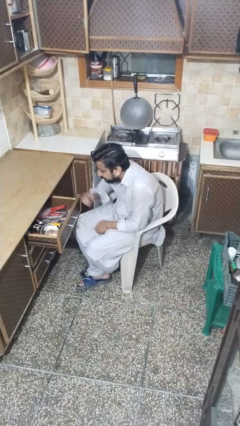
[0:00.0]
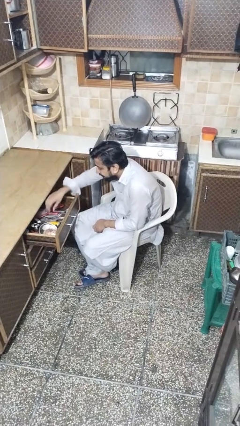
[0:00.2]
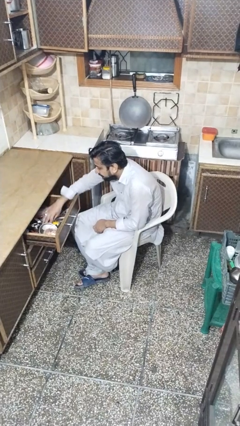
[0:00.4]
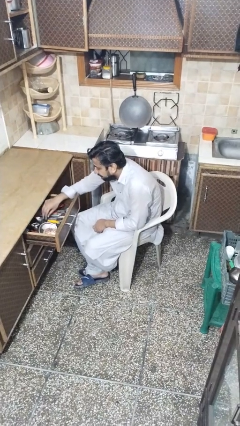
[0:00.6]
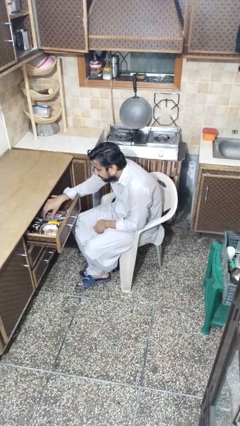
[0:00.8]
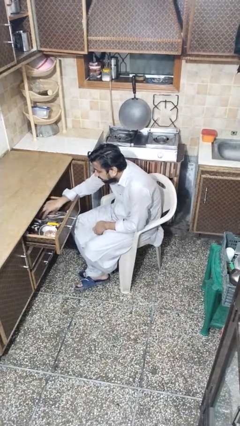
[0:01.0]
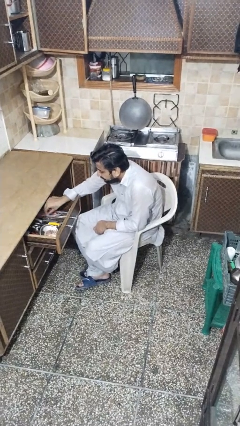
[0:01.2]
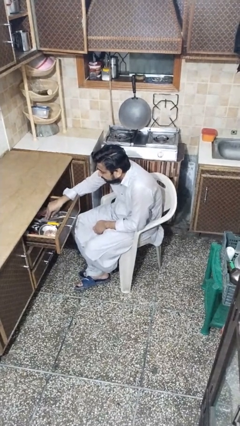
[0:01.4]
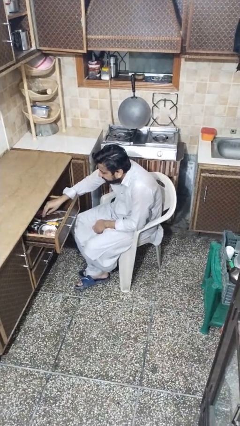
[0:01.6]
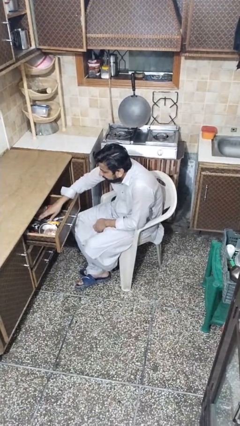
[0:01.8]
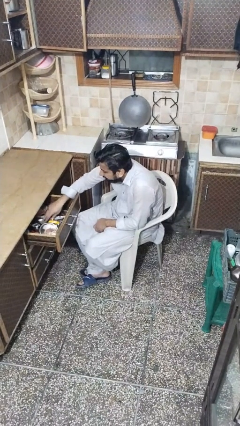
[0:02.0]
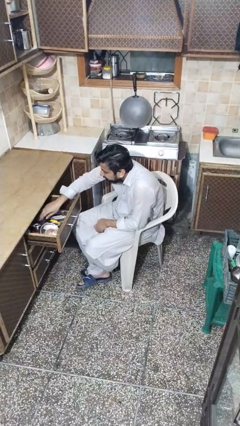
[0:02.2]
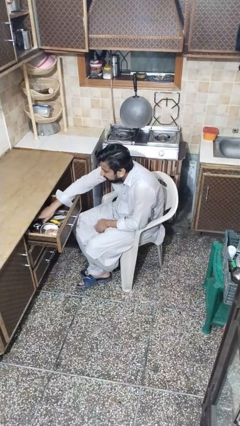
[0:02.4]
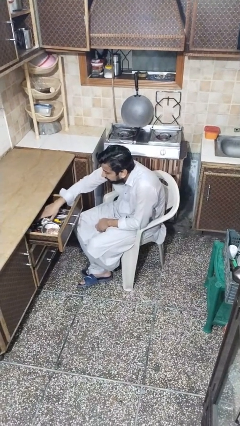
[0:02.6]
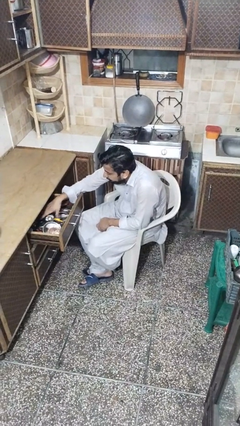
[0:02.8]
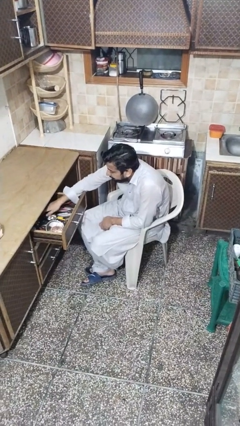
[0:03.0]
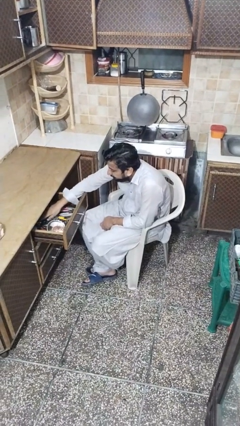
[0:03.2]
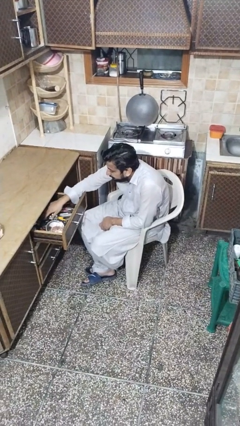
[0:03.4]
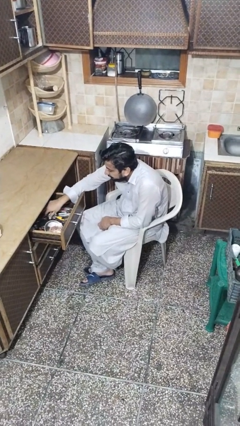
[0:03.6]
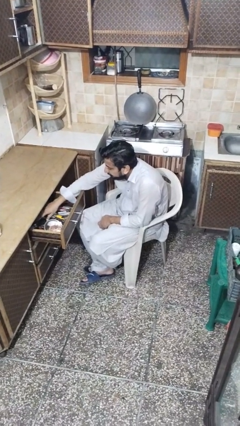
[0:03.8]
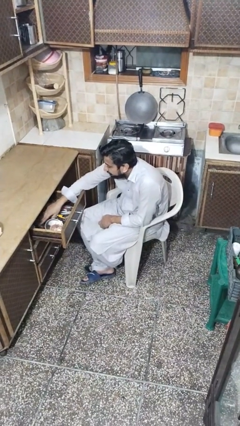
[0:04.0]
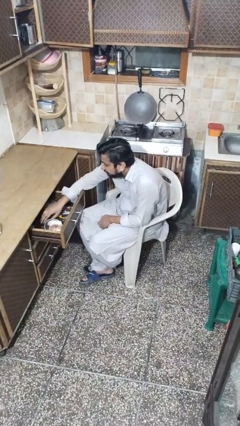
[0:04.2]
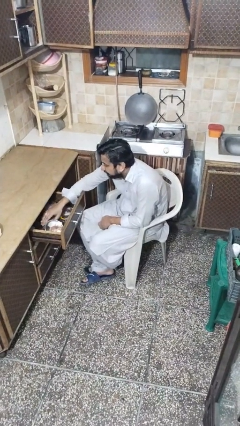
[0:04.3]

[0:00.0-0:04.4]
person searches in kitchen drawer

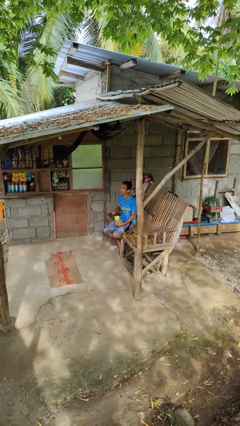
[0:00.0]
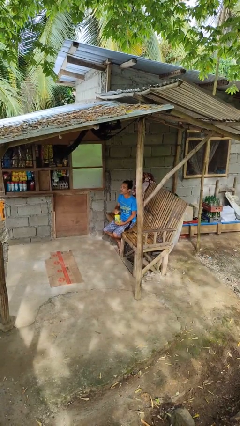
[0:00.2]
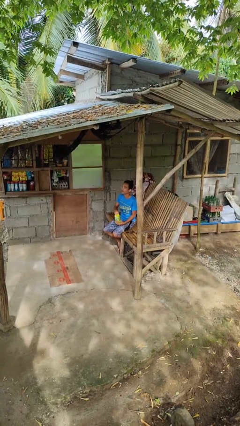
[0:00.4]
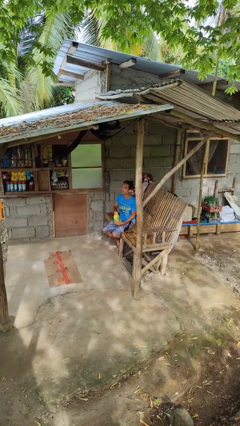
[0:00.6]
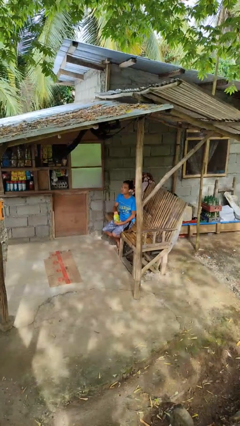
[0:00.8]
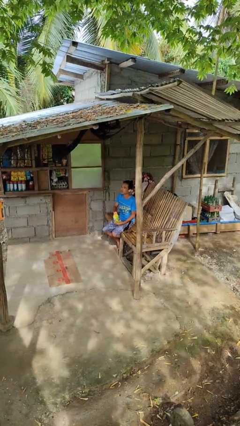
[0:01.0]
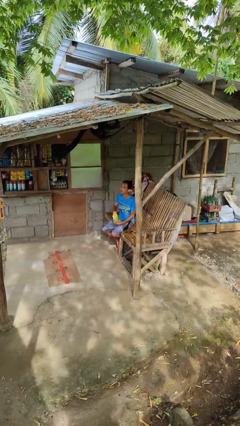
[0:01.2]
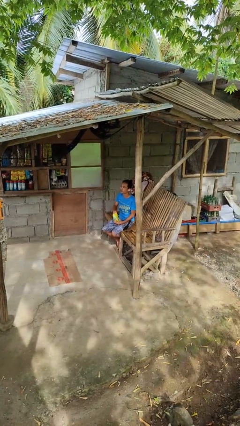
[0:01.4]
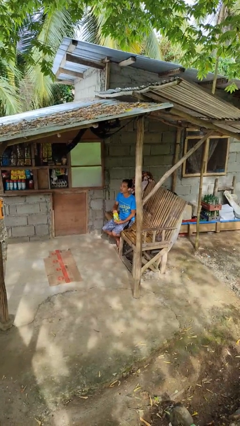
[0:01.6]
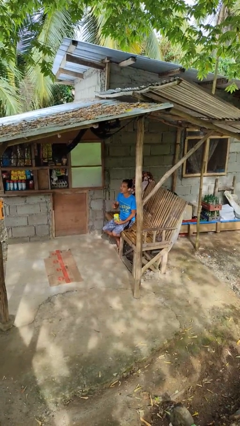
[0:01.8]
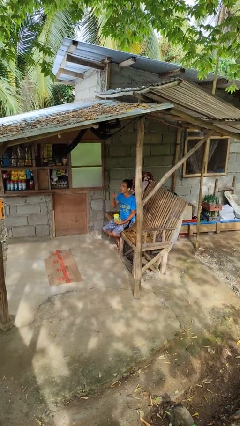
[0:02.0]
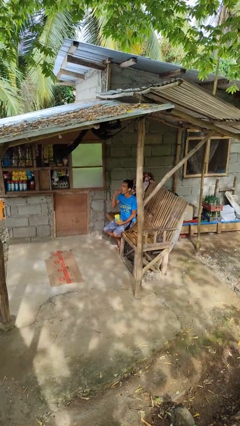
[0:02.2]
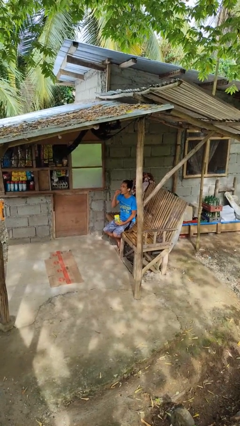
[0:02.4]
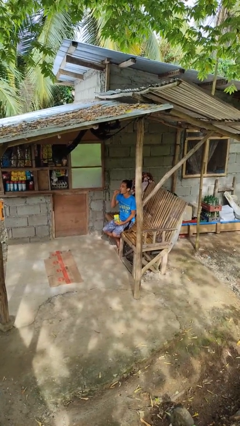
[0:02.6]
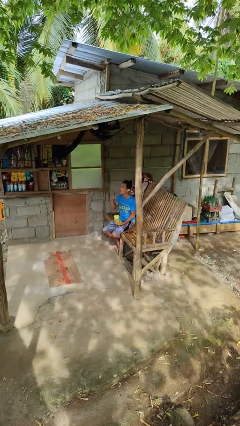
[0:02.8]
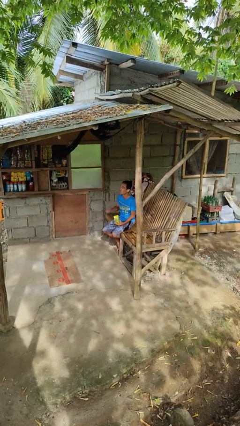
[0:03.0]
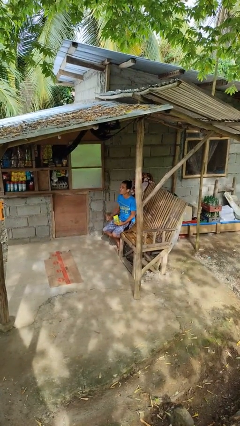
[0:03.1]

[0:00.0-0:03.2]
person eats snack from bag

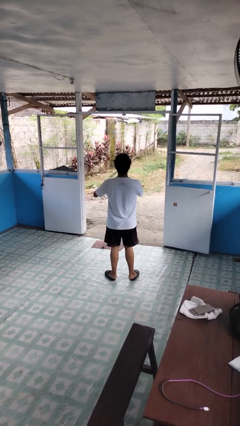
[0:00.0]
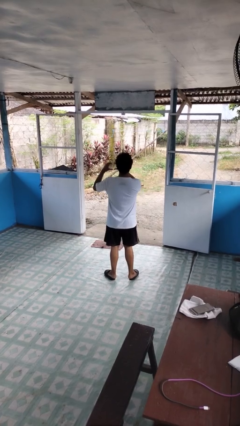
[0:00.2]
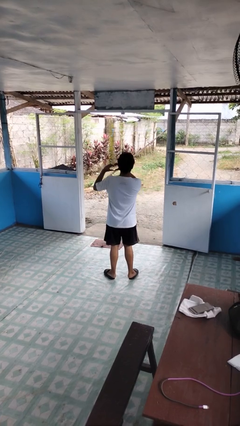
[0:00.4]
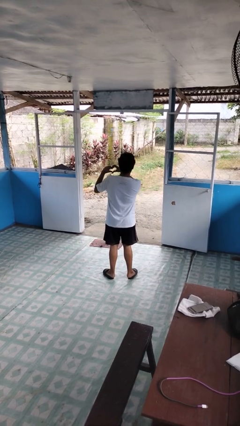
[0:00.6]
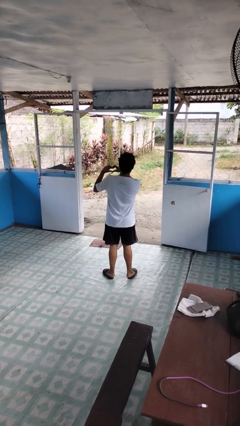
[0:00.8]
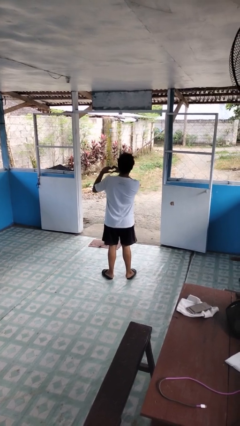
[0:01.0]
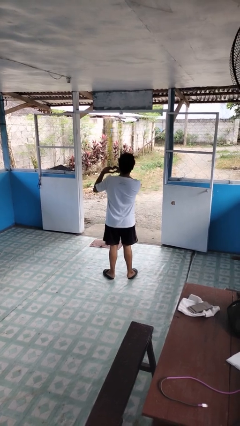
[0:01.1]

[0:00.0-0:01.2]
person gestures heart

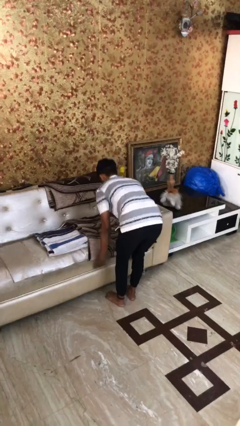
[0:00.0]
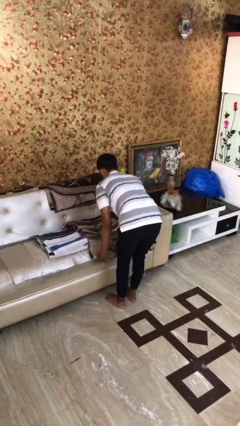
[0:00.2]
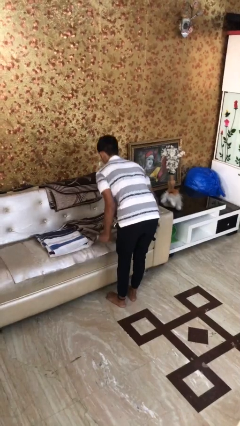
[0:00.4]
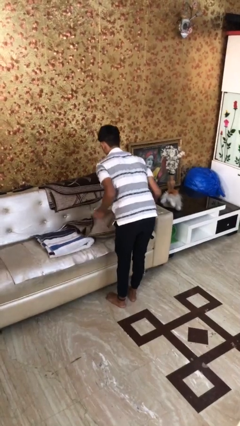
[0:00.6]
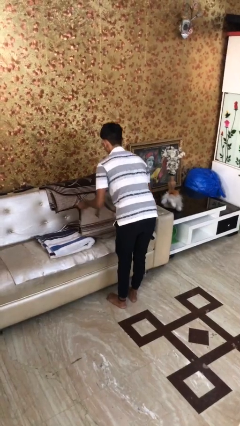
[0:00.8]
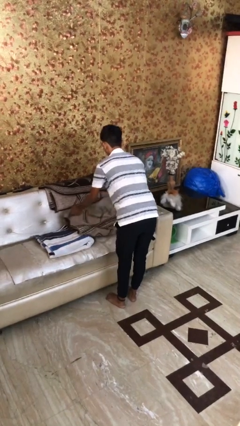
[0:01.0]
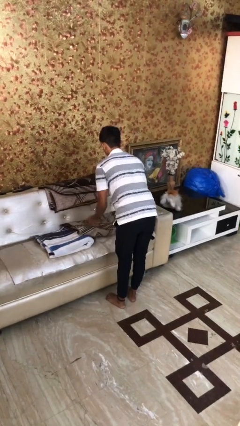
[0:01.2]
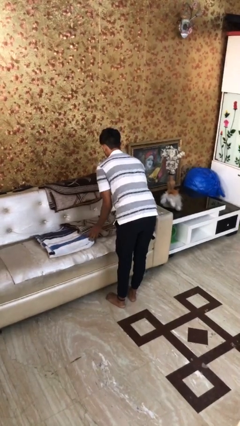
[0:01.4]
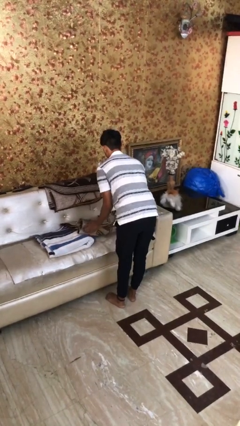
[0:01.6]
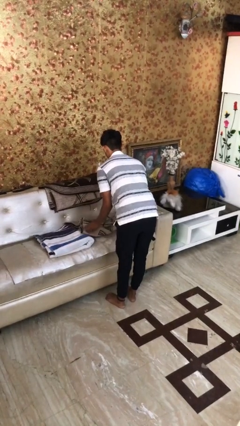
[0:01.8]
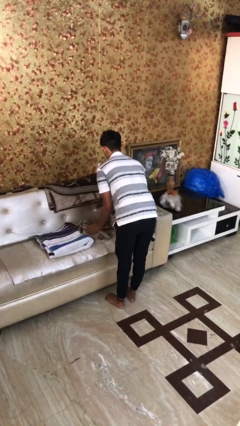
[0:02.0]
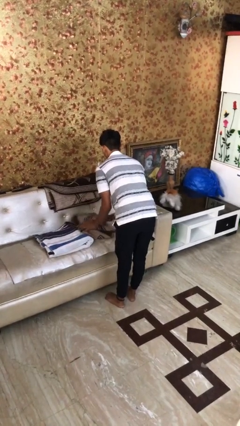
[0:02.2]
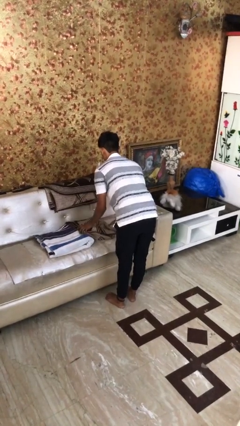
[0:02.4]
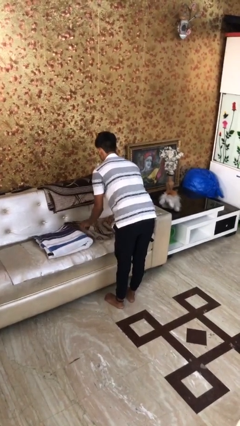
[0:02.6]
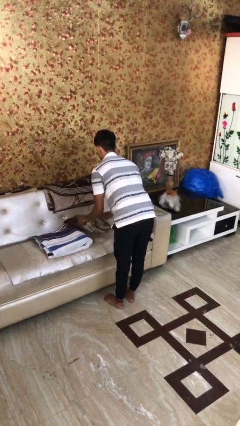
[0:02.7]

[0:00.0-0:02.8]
person folds towel

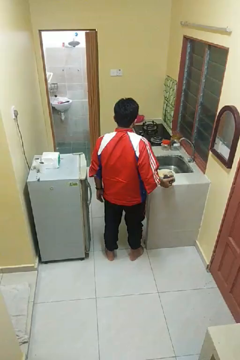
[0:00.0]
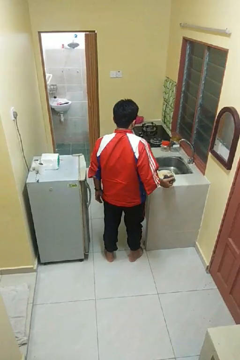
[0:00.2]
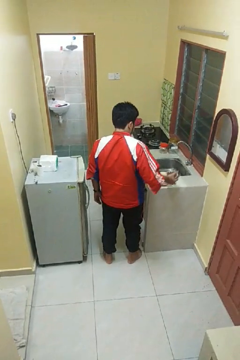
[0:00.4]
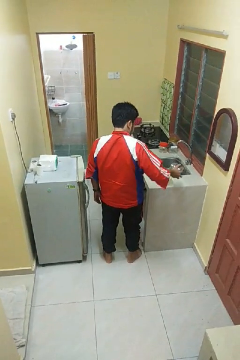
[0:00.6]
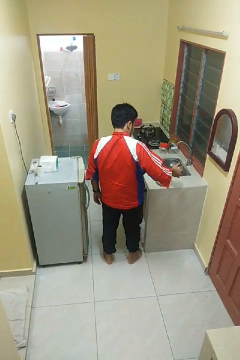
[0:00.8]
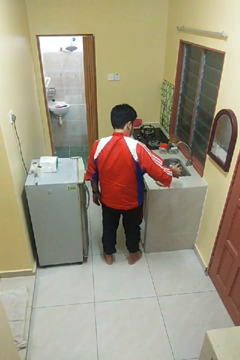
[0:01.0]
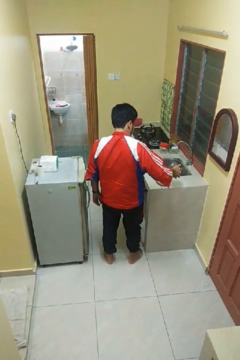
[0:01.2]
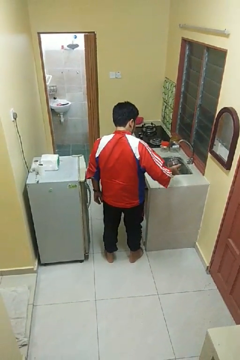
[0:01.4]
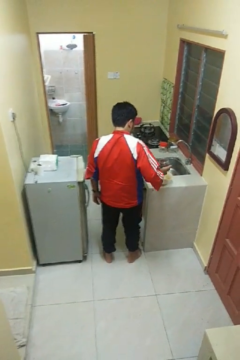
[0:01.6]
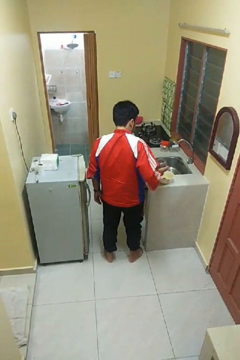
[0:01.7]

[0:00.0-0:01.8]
person pours into bowl

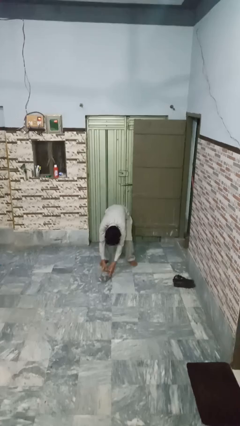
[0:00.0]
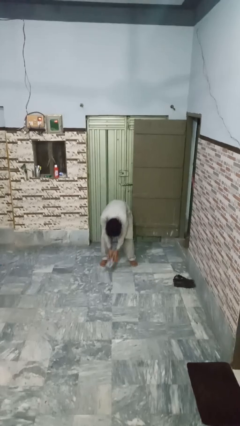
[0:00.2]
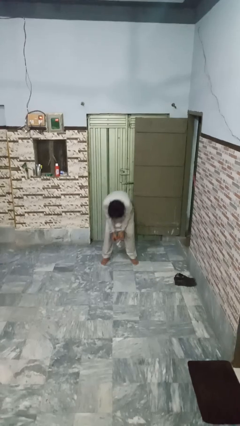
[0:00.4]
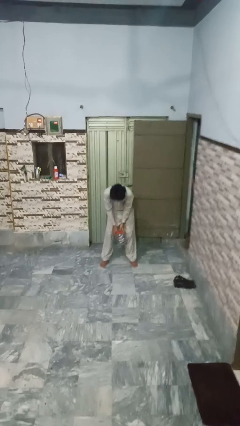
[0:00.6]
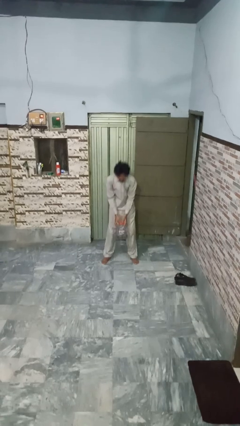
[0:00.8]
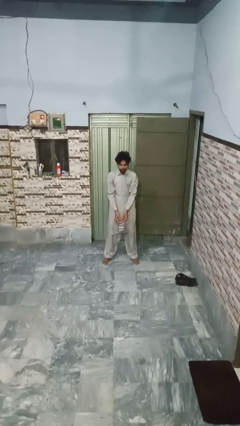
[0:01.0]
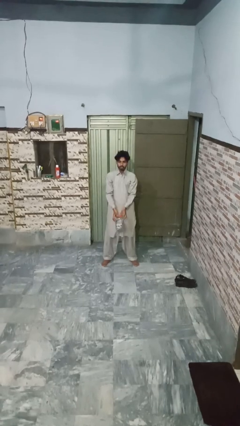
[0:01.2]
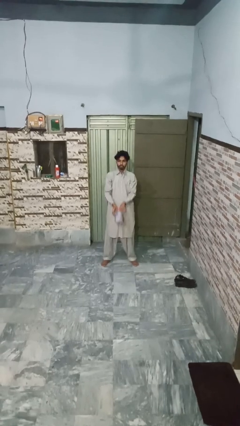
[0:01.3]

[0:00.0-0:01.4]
person picks up object from floor

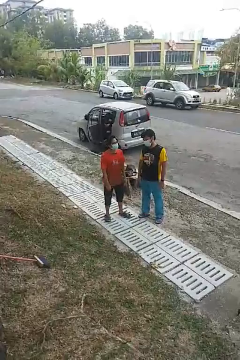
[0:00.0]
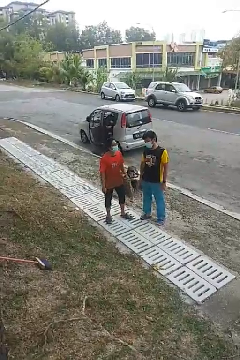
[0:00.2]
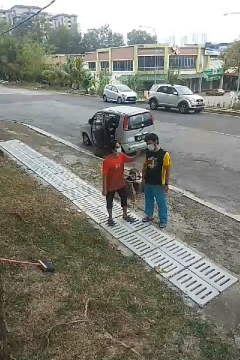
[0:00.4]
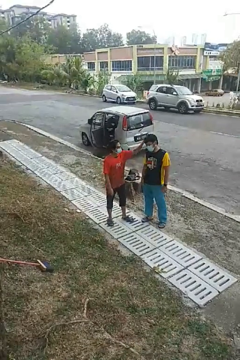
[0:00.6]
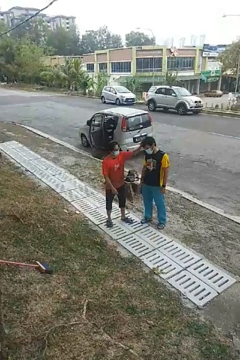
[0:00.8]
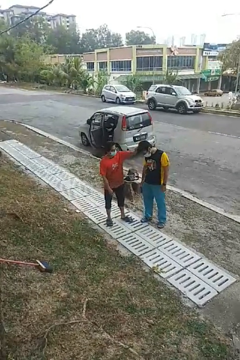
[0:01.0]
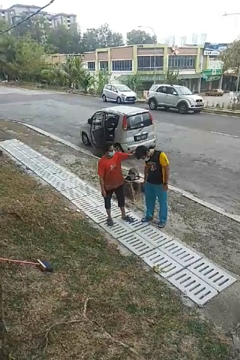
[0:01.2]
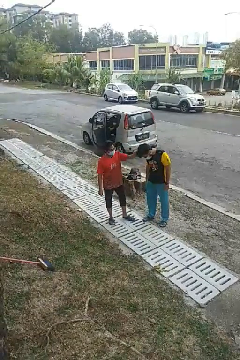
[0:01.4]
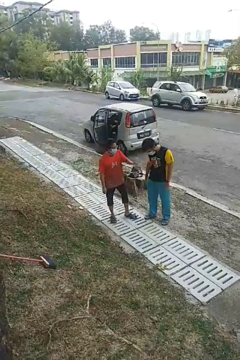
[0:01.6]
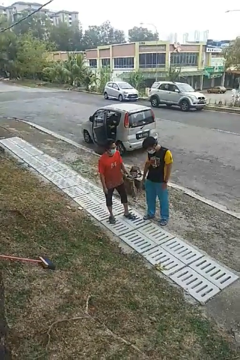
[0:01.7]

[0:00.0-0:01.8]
person grabs person by hair

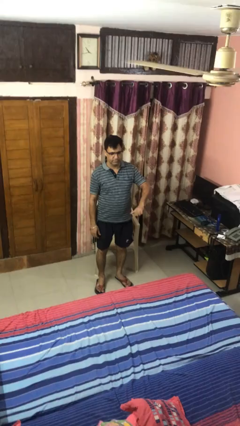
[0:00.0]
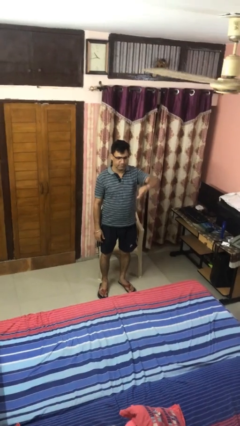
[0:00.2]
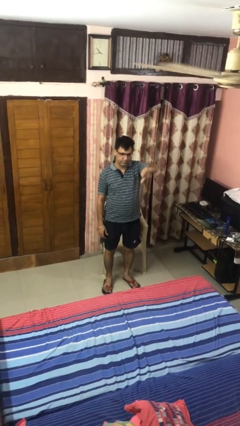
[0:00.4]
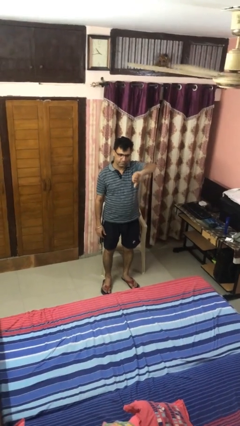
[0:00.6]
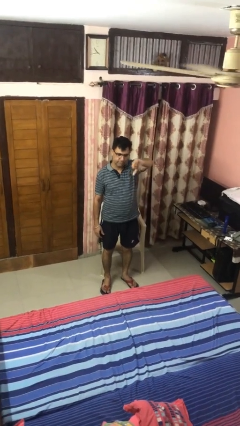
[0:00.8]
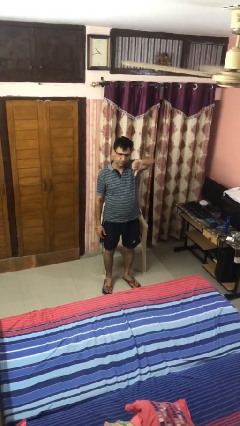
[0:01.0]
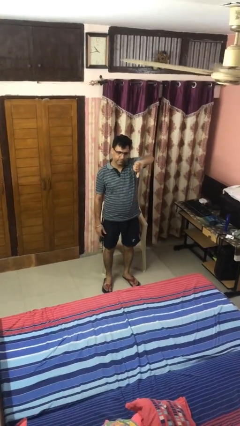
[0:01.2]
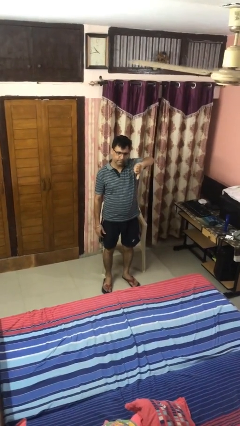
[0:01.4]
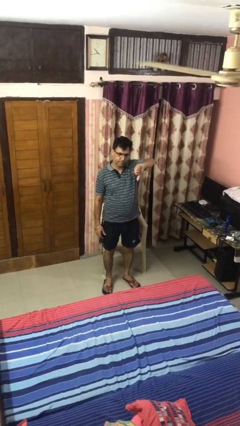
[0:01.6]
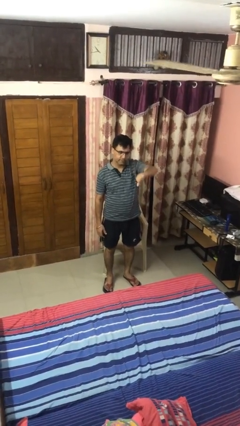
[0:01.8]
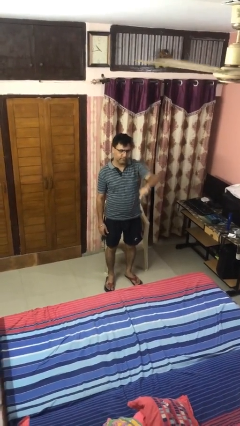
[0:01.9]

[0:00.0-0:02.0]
person gestures thumbs down
